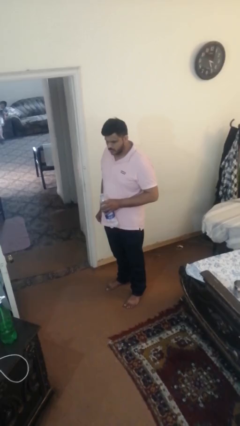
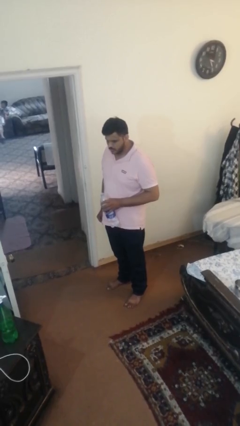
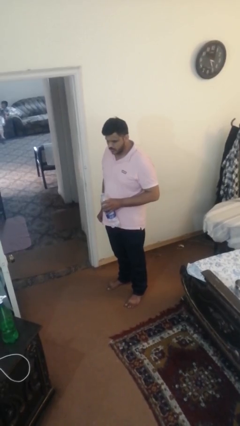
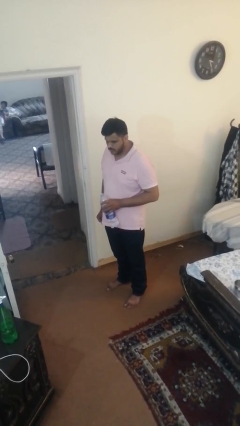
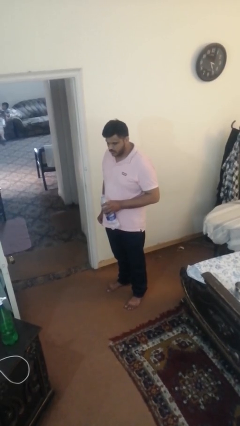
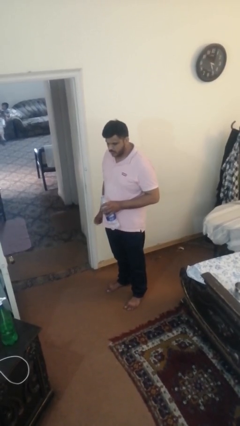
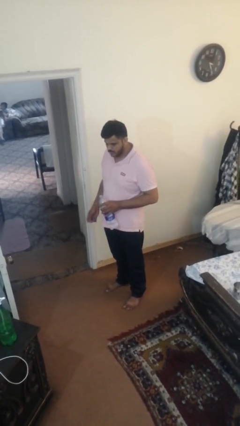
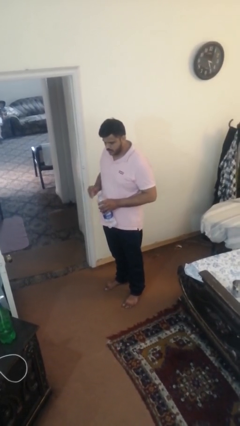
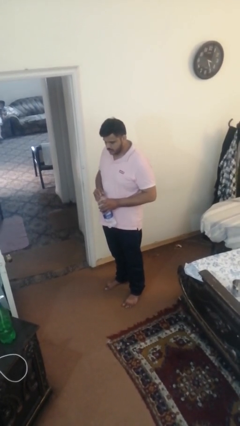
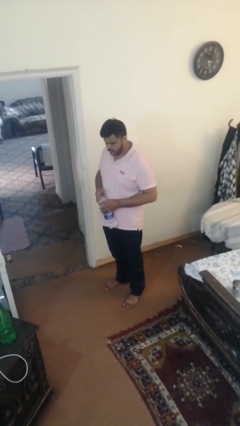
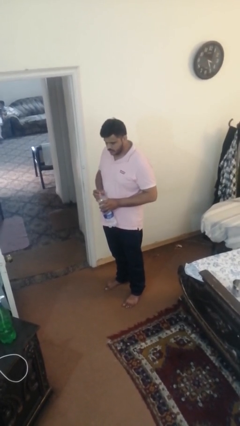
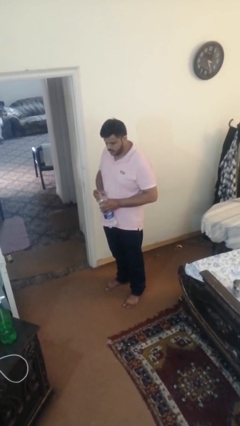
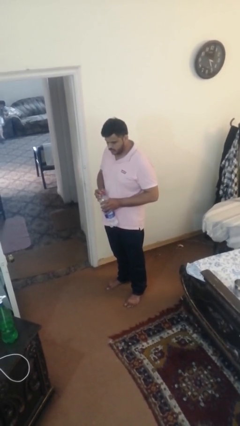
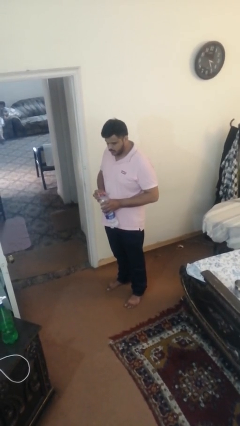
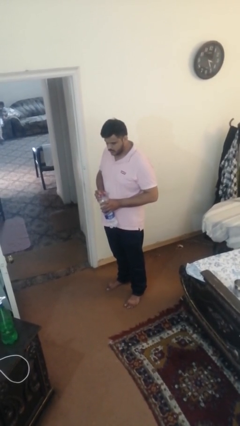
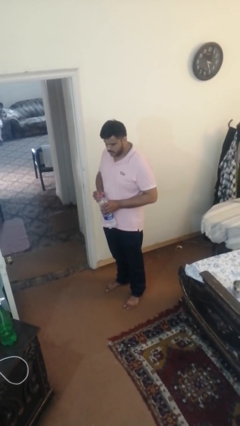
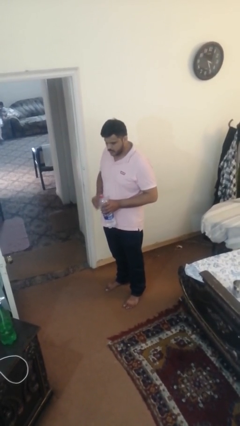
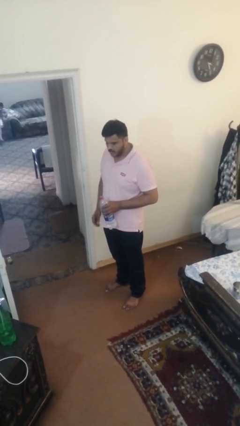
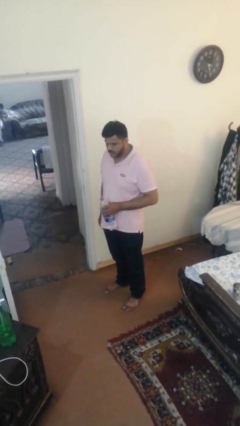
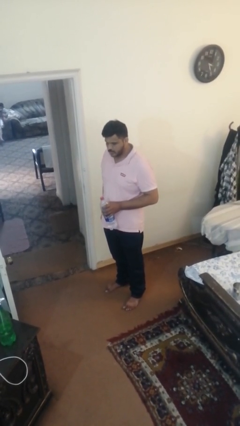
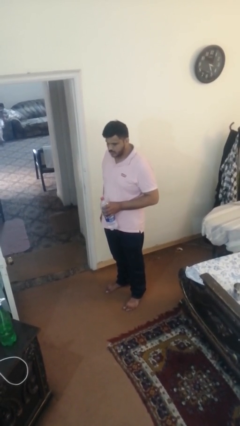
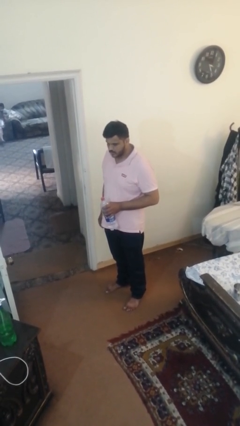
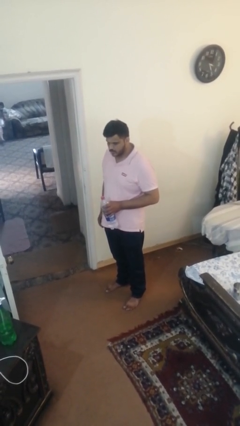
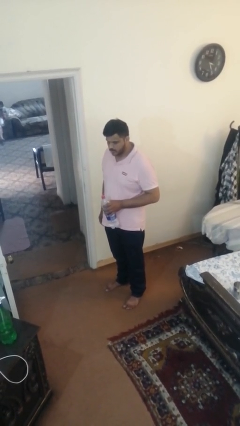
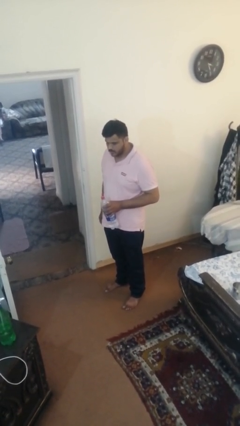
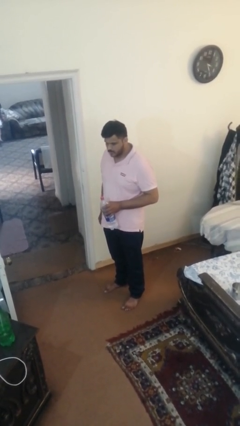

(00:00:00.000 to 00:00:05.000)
person screws lid to bottle

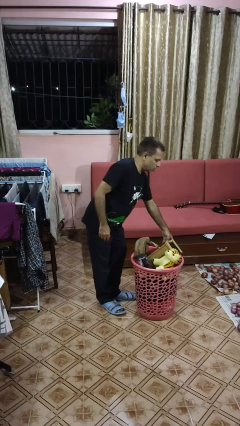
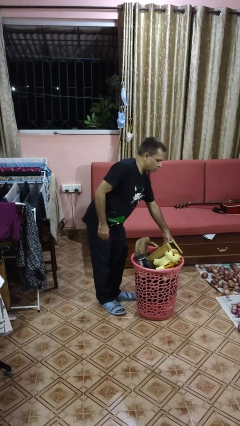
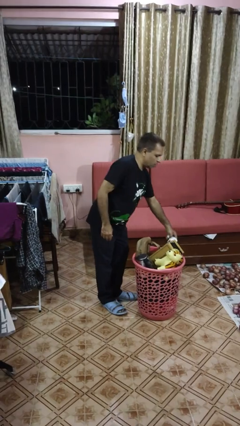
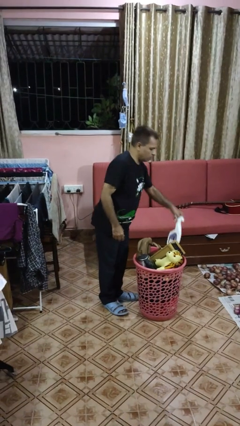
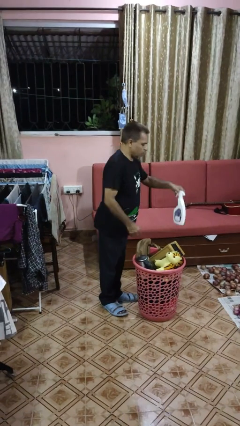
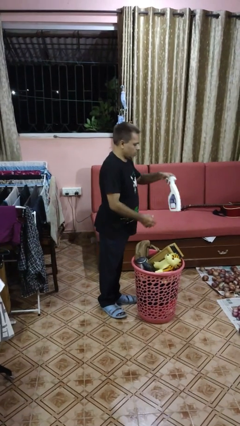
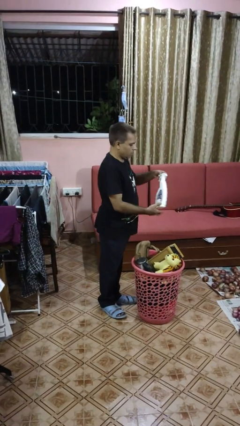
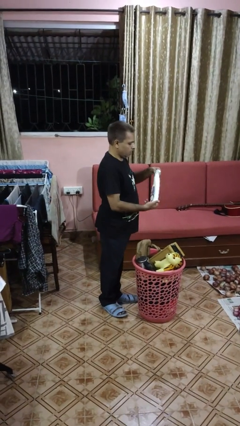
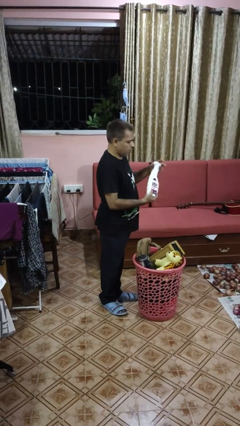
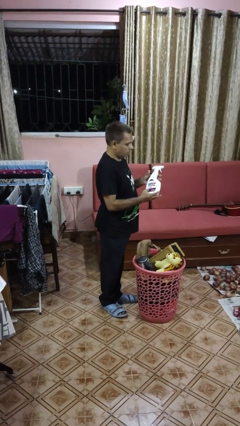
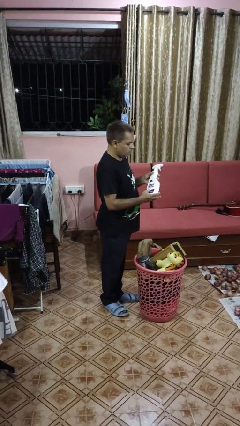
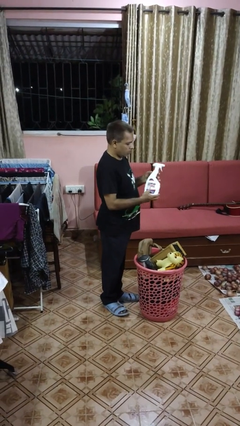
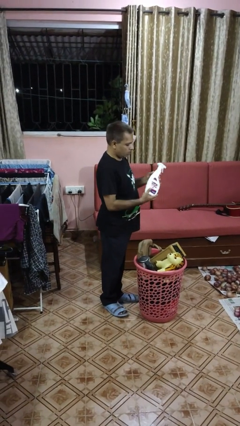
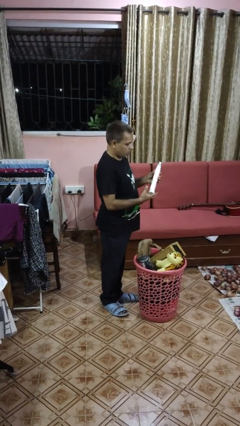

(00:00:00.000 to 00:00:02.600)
person takes object from basket

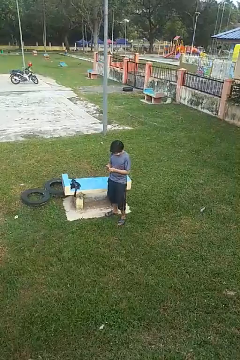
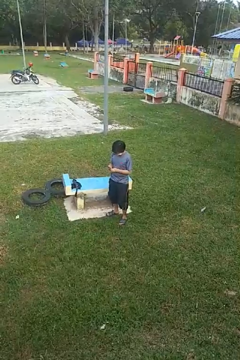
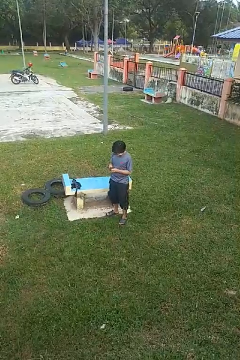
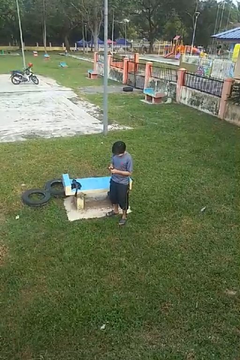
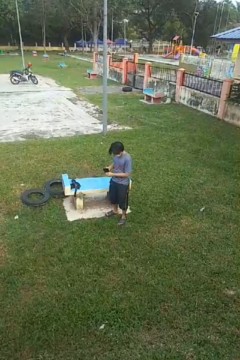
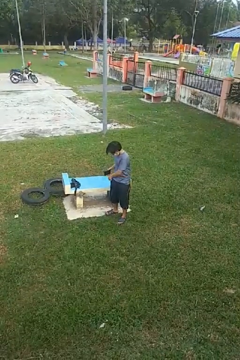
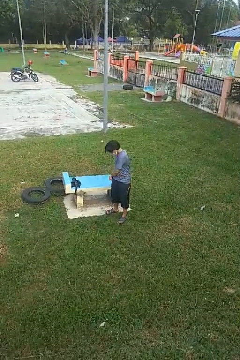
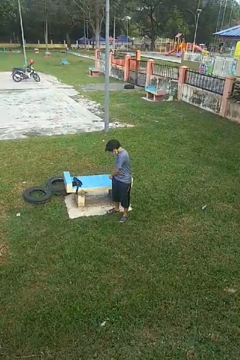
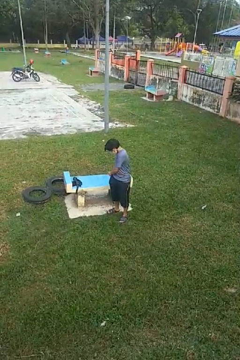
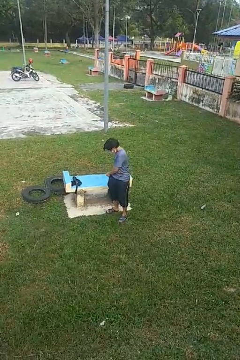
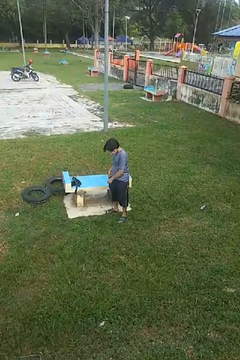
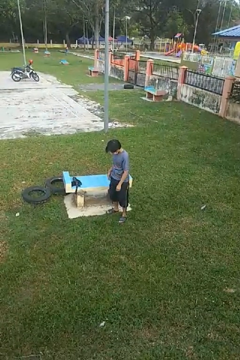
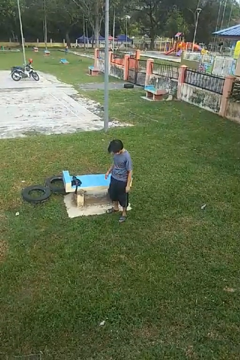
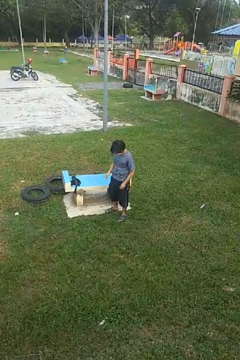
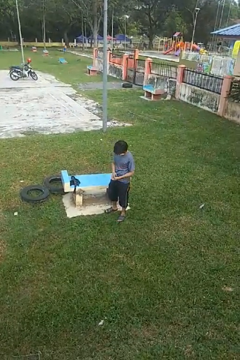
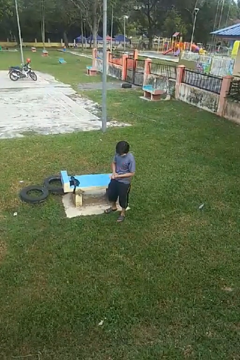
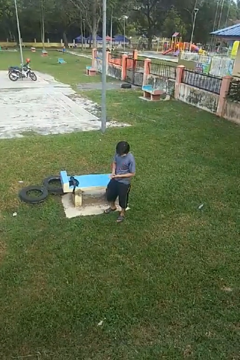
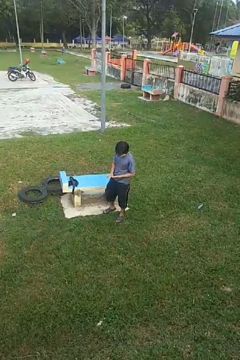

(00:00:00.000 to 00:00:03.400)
person puts phone into pocket

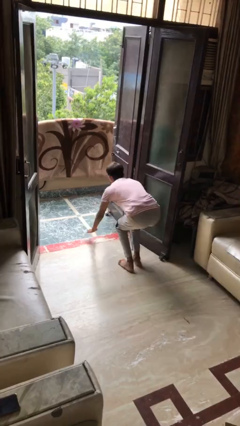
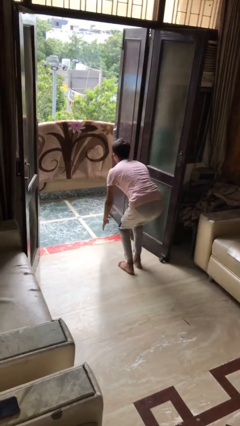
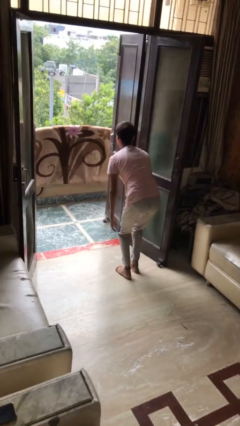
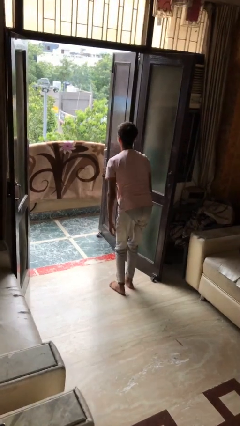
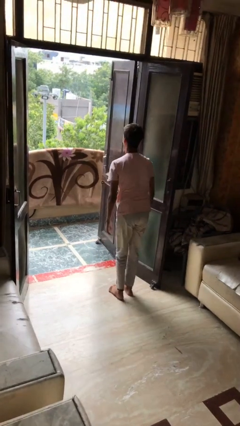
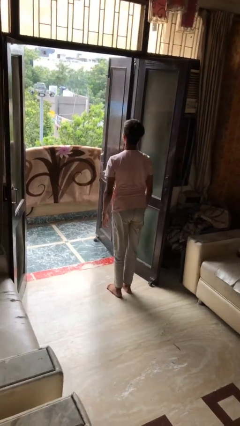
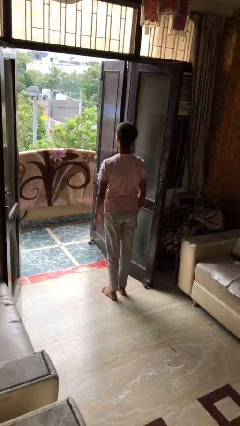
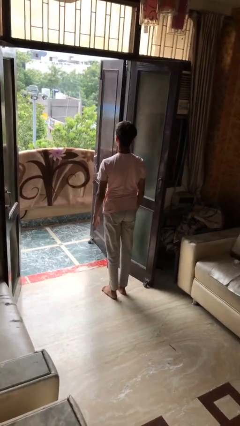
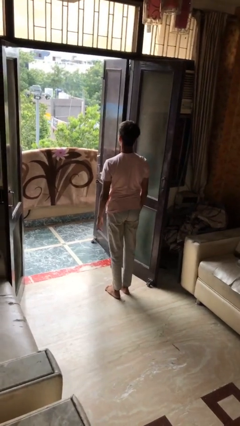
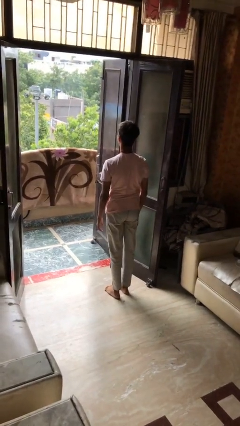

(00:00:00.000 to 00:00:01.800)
person stands up from floor

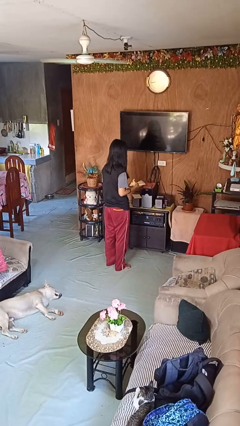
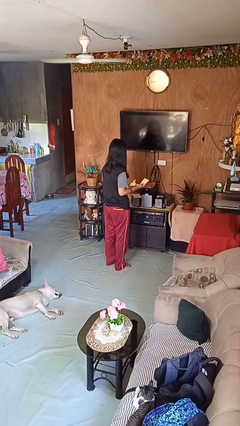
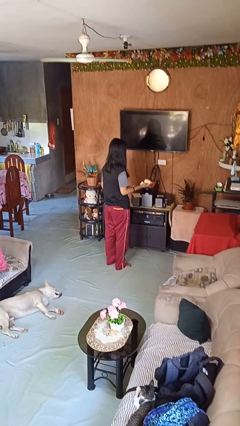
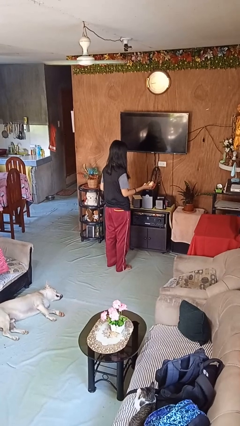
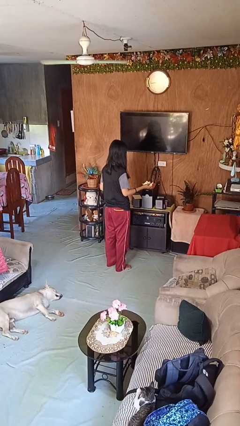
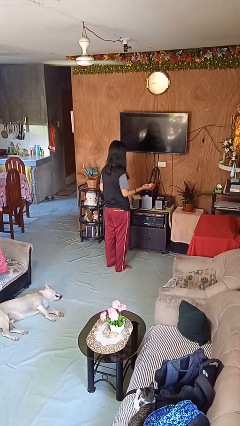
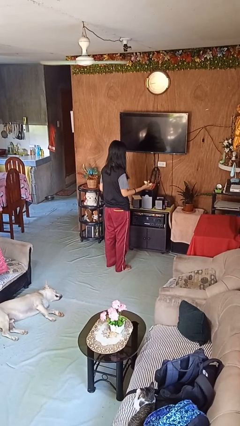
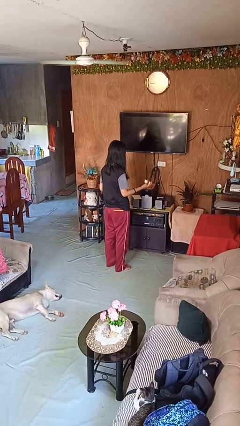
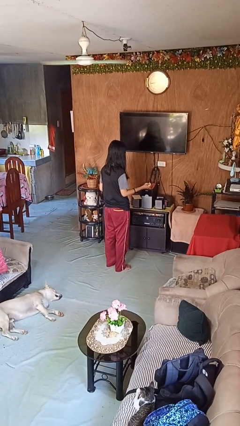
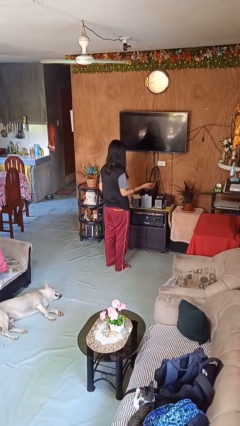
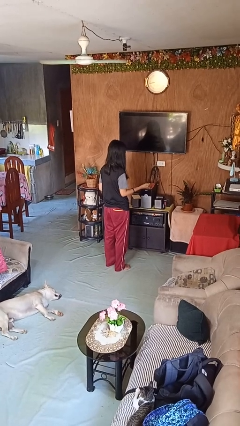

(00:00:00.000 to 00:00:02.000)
person crumples paper

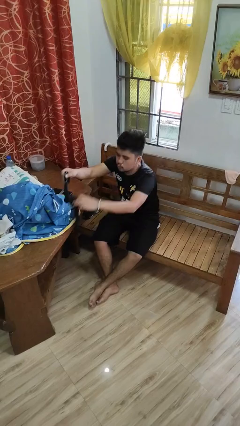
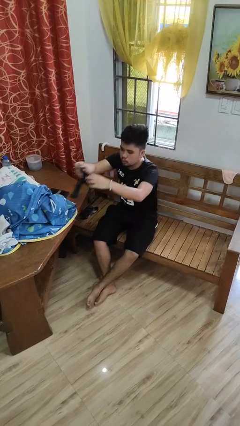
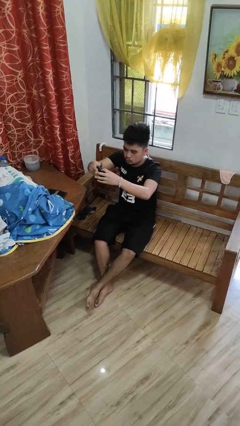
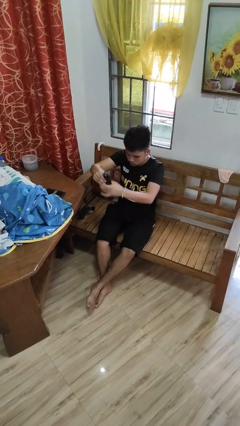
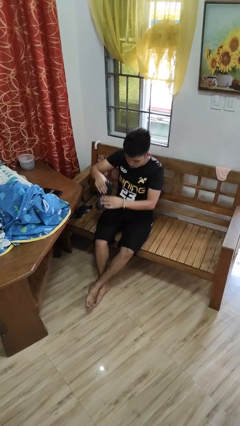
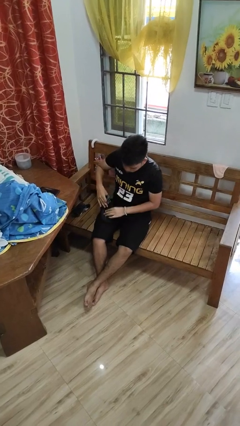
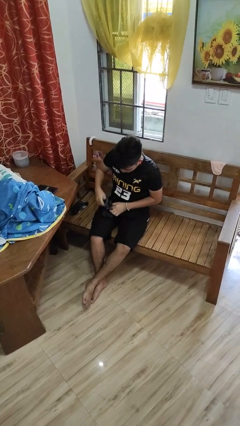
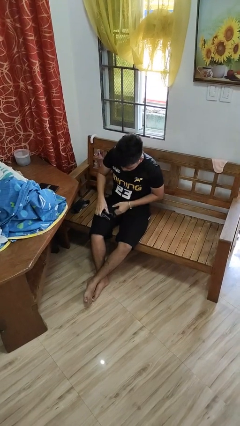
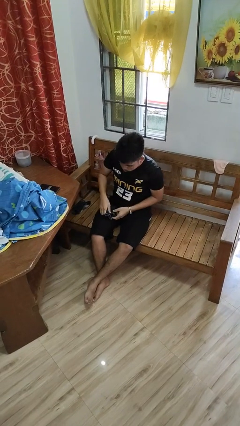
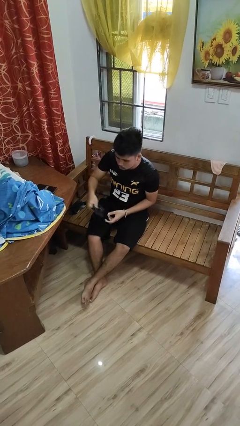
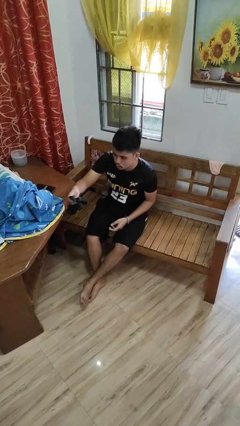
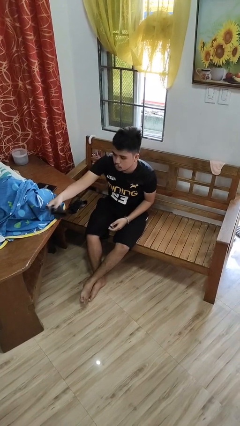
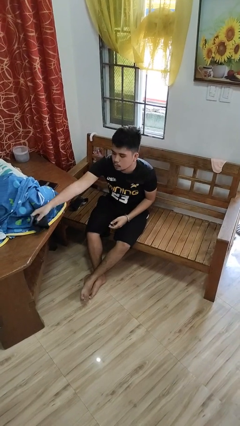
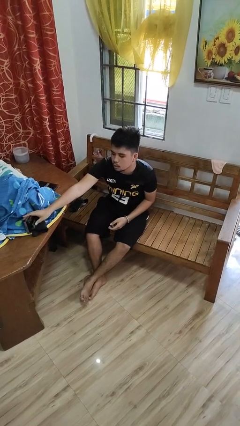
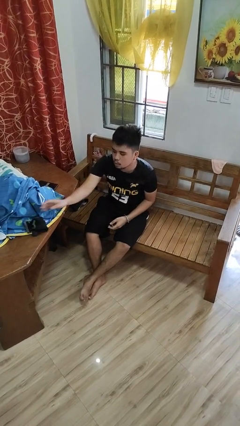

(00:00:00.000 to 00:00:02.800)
person folds socks

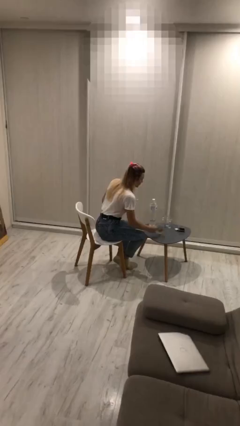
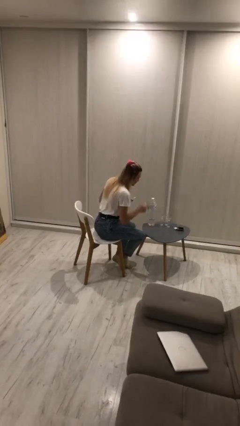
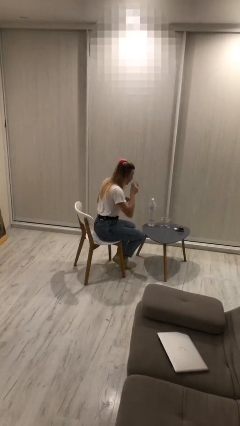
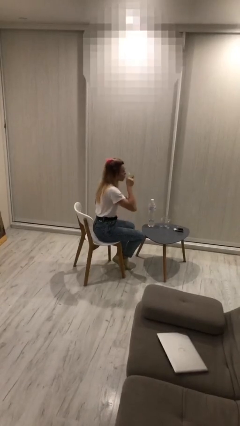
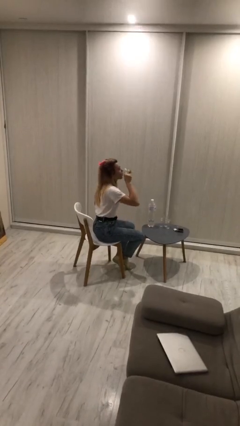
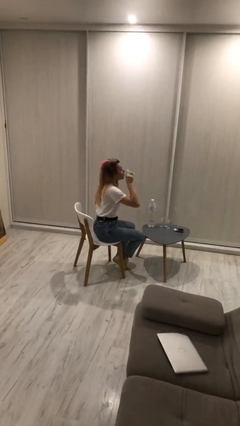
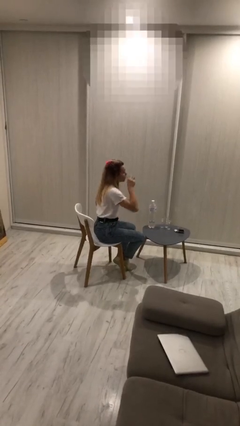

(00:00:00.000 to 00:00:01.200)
person drinks from cup
